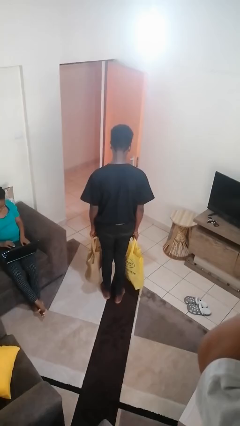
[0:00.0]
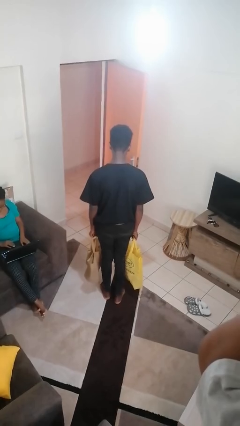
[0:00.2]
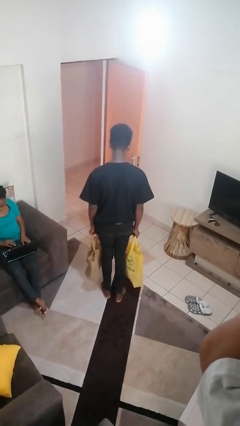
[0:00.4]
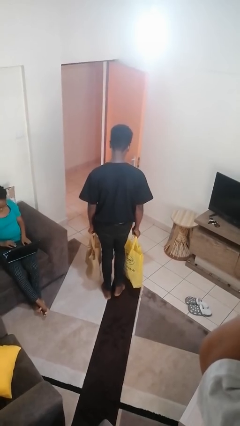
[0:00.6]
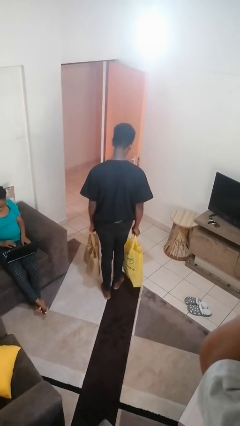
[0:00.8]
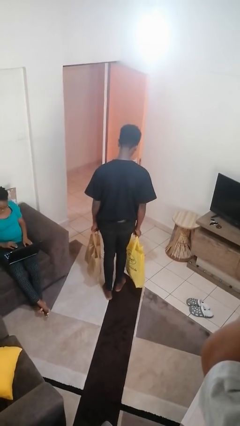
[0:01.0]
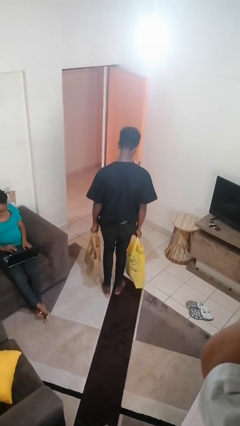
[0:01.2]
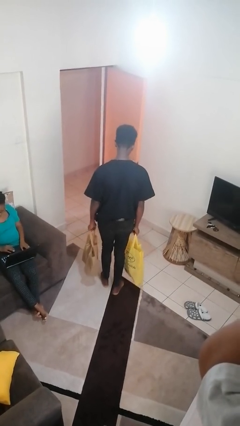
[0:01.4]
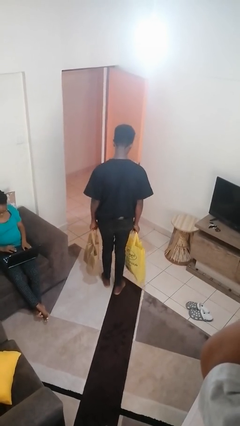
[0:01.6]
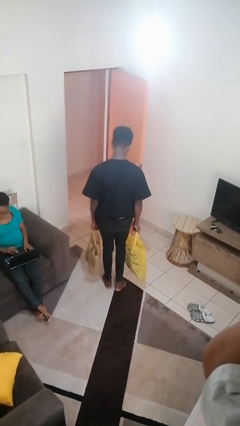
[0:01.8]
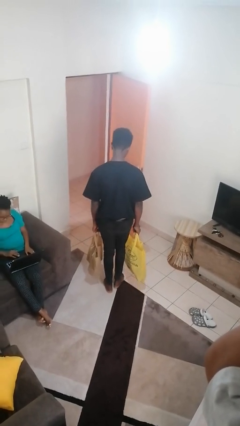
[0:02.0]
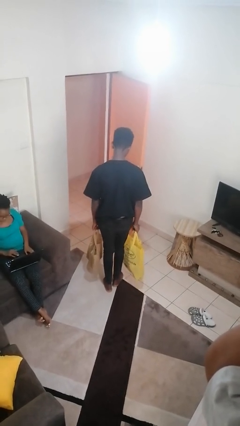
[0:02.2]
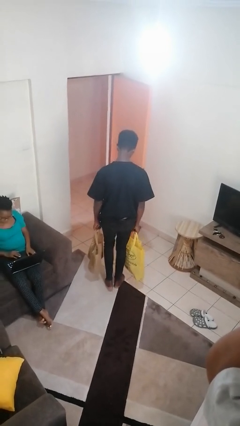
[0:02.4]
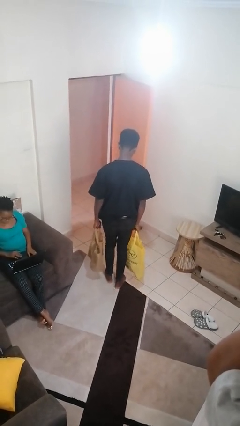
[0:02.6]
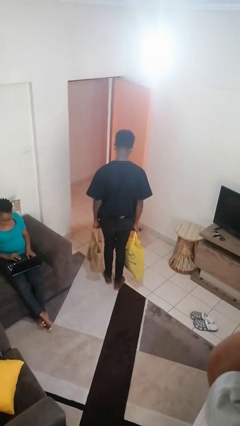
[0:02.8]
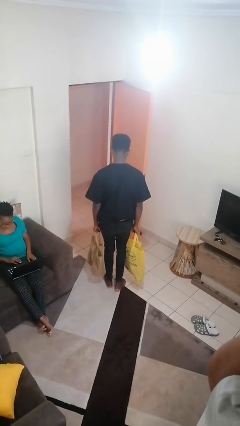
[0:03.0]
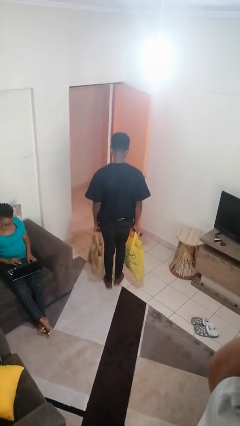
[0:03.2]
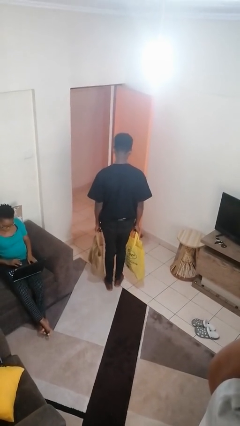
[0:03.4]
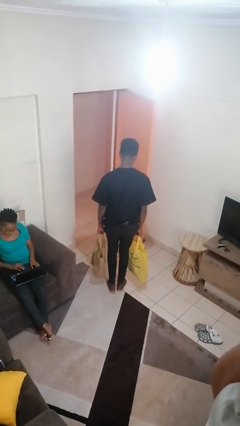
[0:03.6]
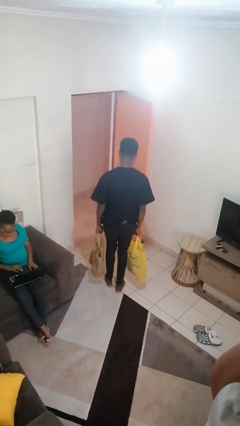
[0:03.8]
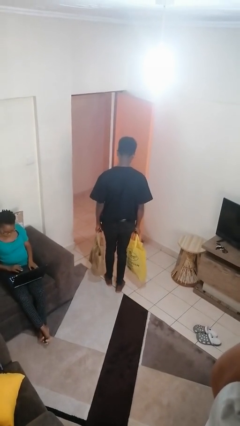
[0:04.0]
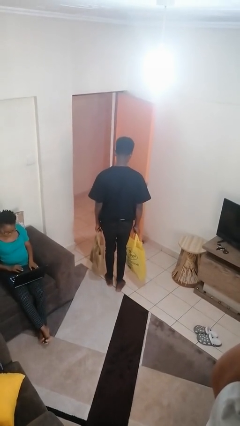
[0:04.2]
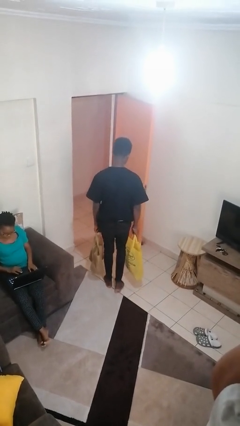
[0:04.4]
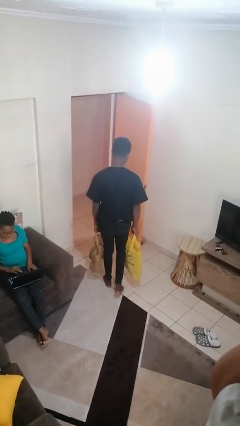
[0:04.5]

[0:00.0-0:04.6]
person carries groceries

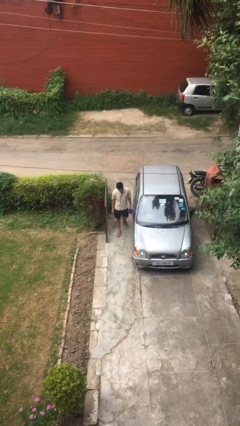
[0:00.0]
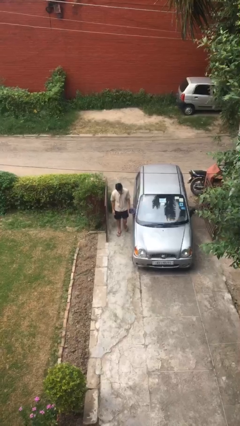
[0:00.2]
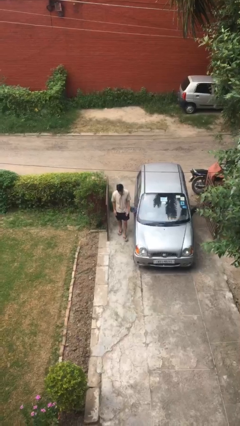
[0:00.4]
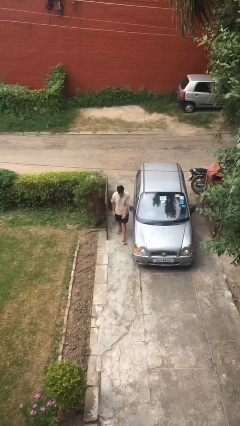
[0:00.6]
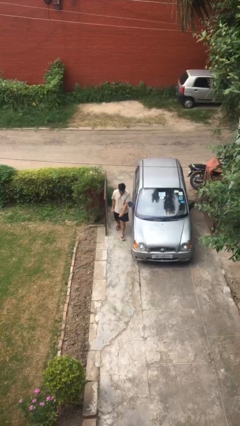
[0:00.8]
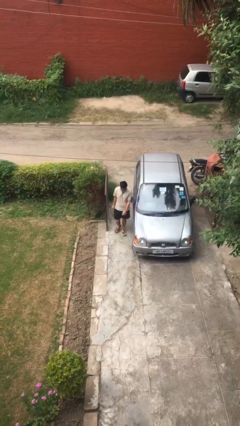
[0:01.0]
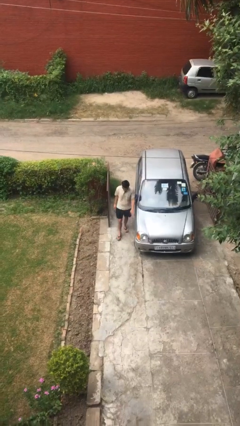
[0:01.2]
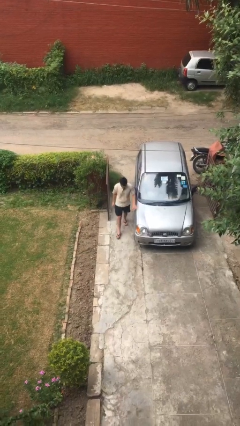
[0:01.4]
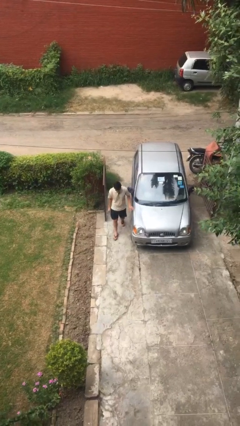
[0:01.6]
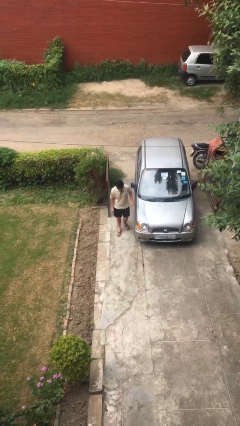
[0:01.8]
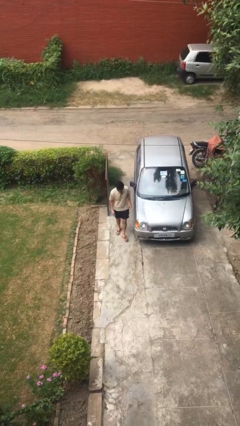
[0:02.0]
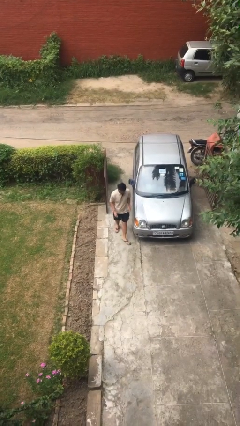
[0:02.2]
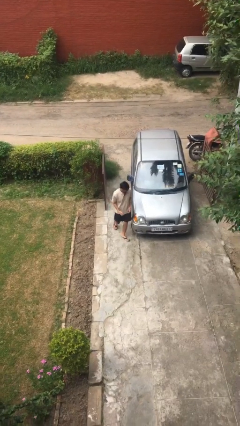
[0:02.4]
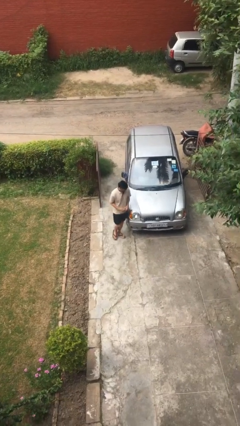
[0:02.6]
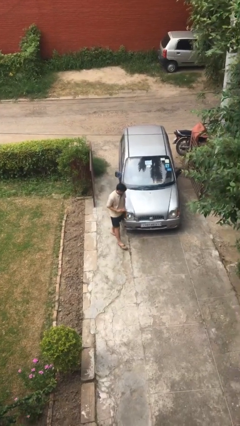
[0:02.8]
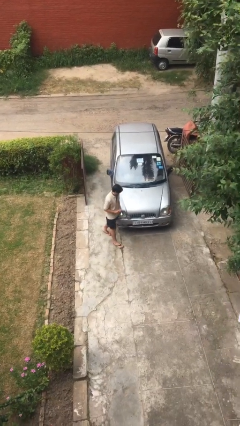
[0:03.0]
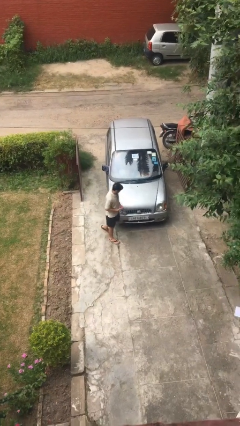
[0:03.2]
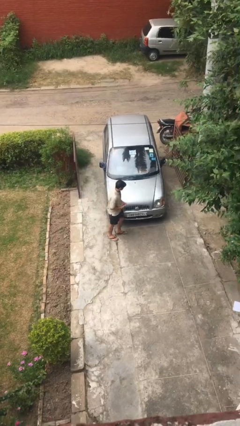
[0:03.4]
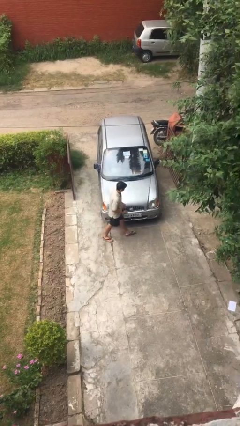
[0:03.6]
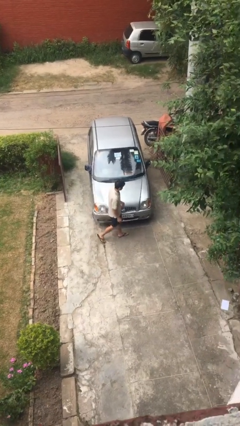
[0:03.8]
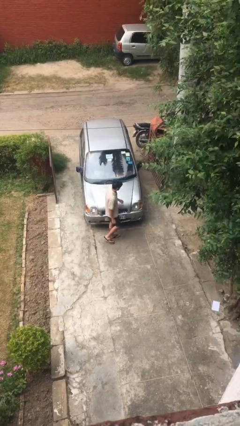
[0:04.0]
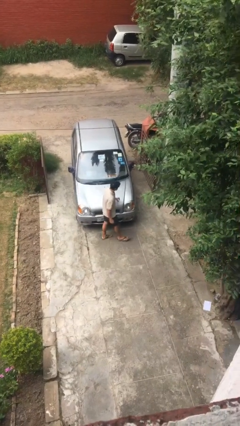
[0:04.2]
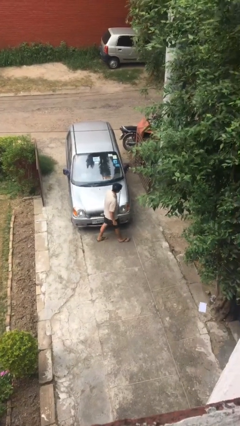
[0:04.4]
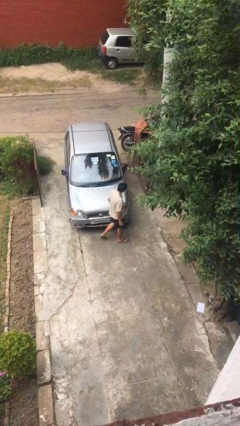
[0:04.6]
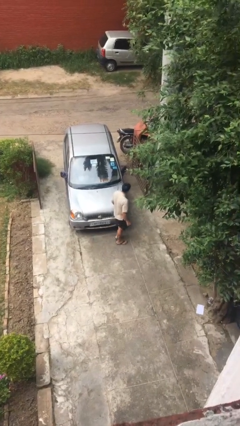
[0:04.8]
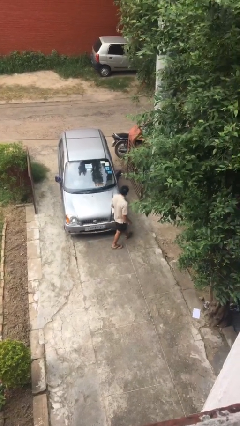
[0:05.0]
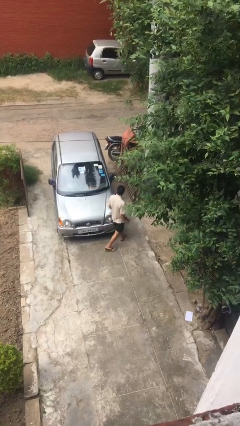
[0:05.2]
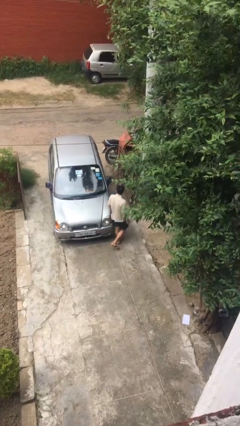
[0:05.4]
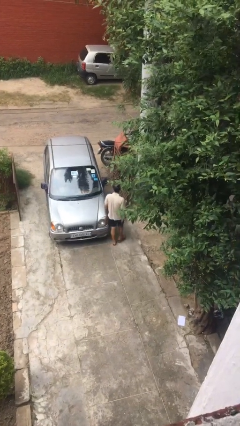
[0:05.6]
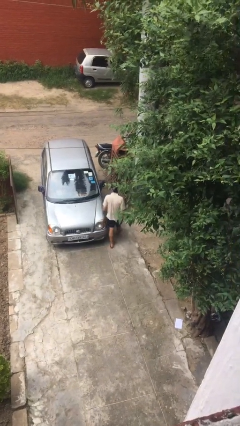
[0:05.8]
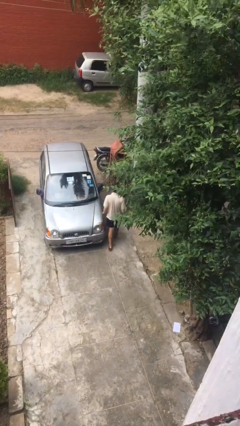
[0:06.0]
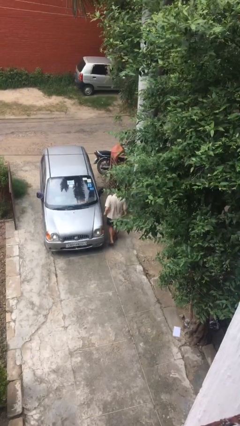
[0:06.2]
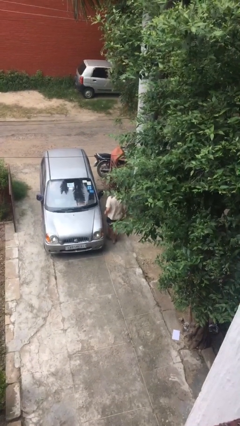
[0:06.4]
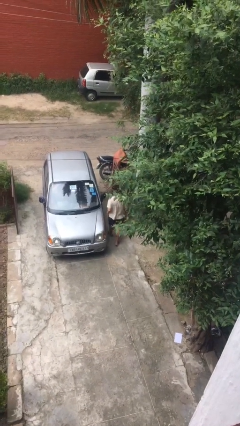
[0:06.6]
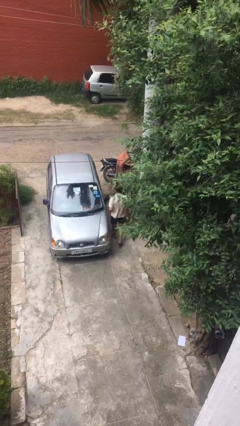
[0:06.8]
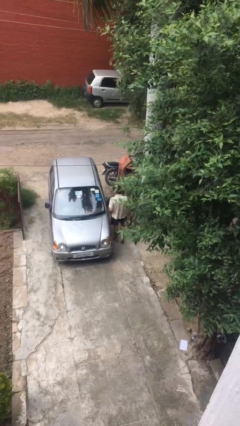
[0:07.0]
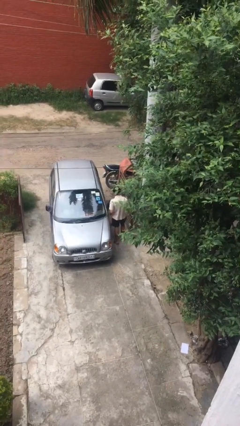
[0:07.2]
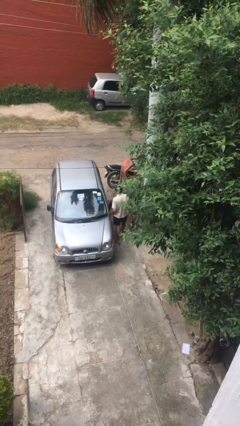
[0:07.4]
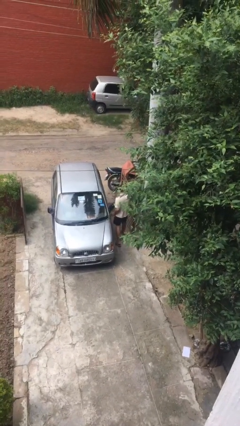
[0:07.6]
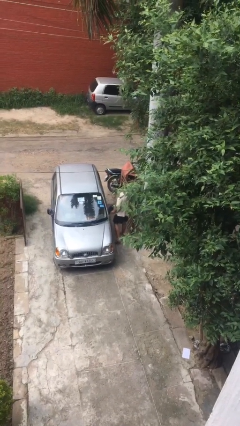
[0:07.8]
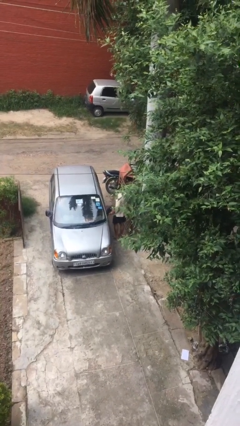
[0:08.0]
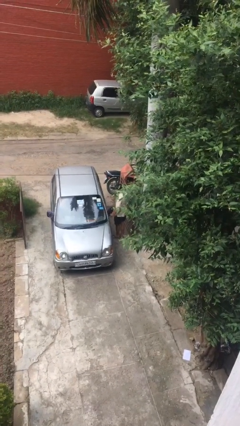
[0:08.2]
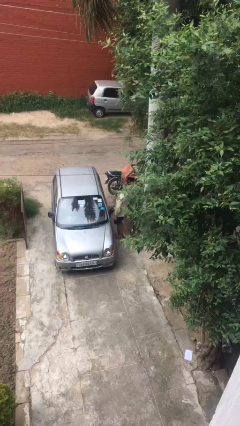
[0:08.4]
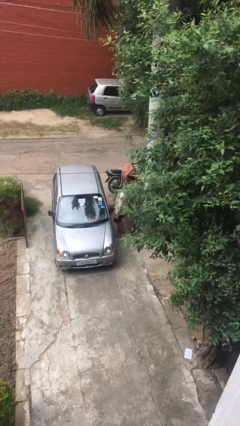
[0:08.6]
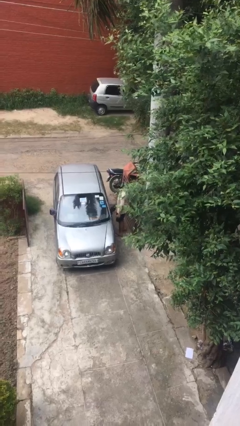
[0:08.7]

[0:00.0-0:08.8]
person walks around car

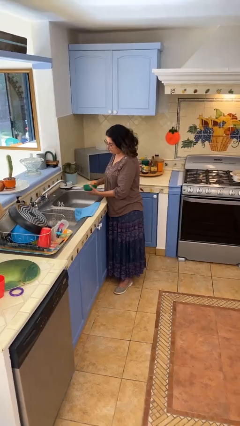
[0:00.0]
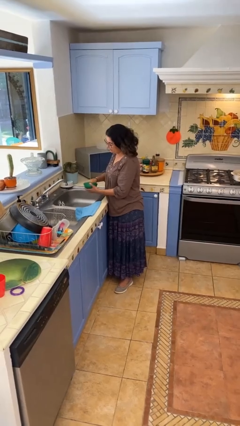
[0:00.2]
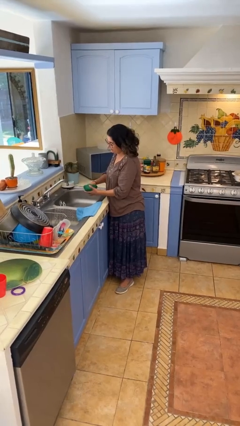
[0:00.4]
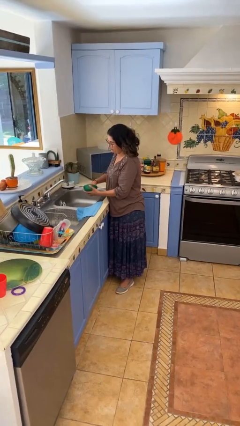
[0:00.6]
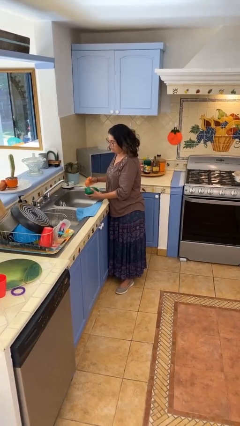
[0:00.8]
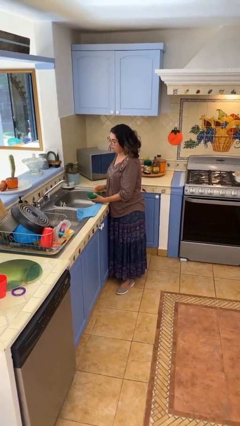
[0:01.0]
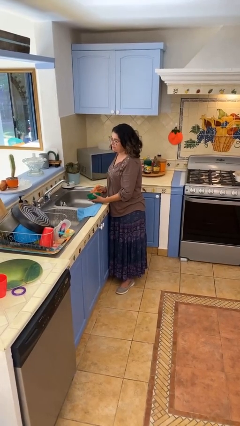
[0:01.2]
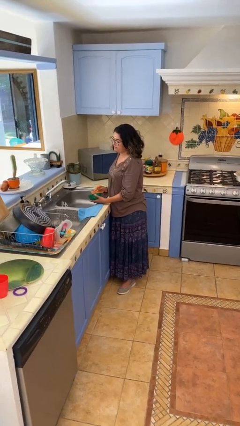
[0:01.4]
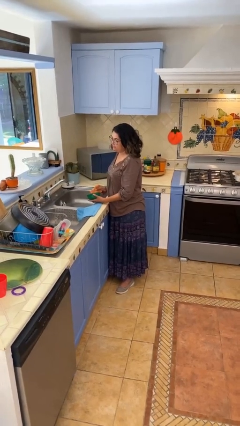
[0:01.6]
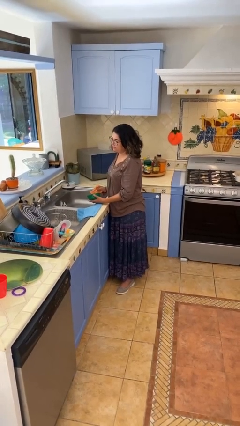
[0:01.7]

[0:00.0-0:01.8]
person washes dish

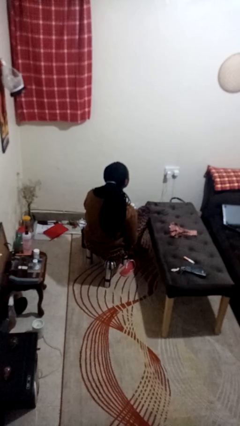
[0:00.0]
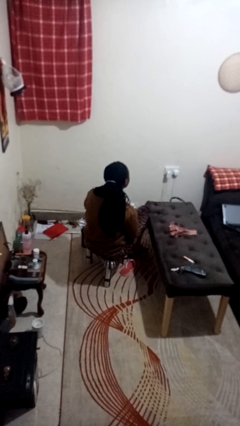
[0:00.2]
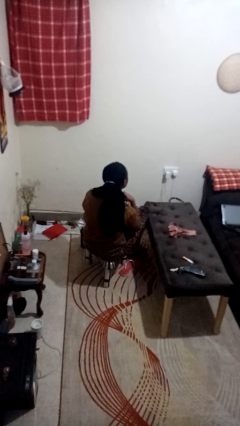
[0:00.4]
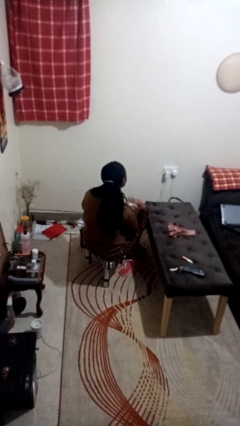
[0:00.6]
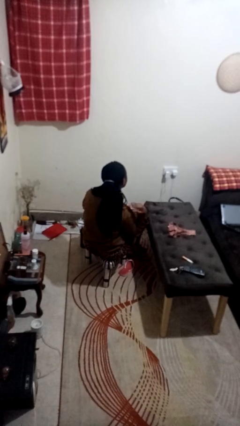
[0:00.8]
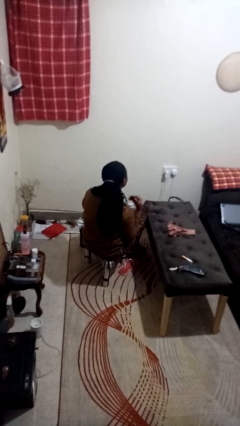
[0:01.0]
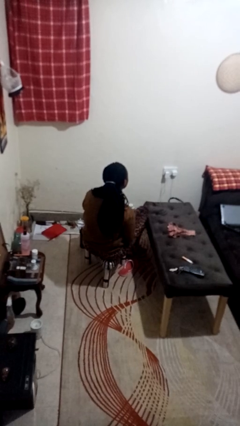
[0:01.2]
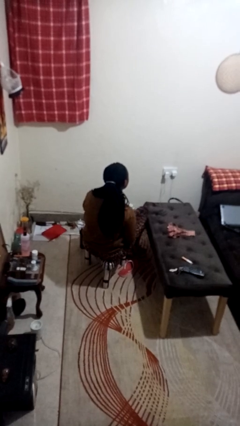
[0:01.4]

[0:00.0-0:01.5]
person gestures cut

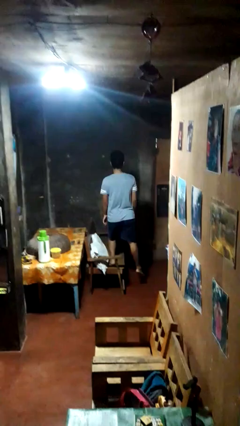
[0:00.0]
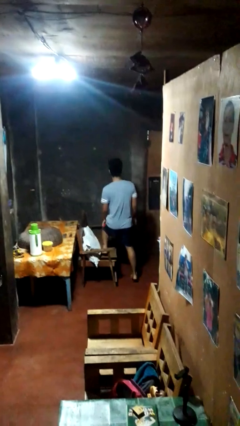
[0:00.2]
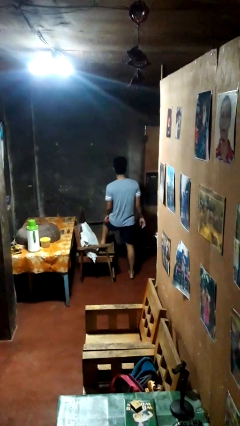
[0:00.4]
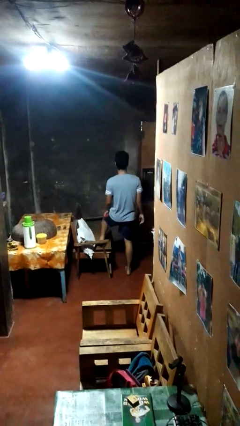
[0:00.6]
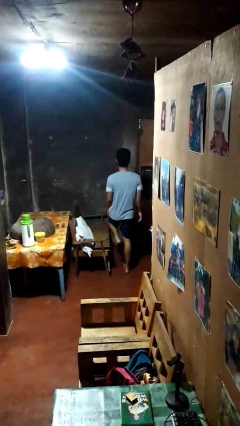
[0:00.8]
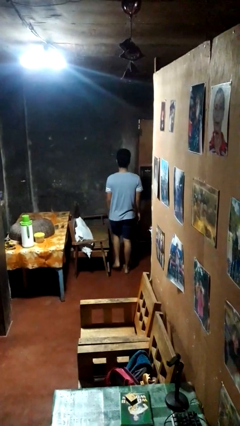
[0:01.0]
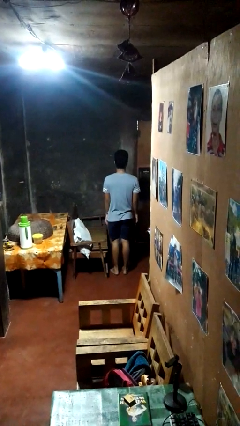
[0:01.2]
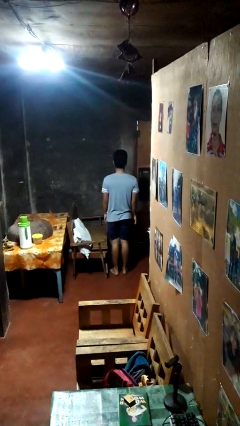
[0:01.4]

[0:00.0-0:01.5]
person climbs off couch
